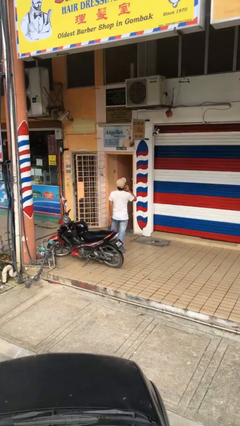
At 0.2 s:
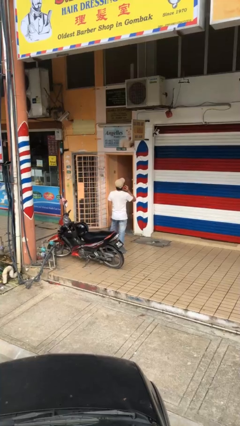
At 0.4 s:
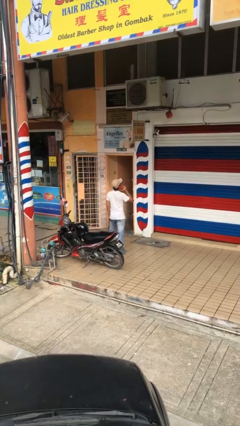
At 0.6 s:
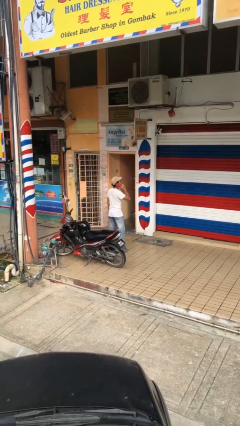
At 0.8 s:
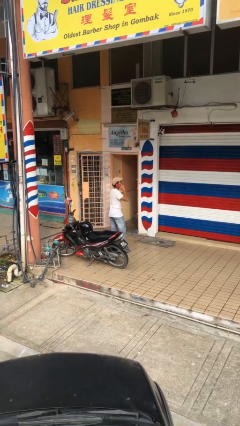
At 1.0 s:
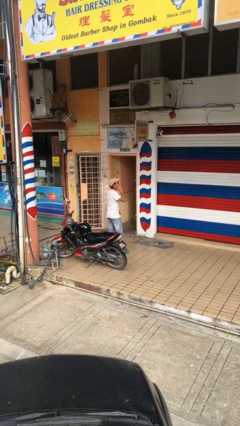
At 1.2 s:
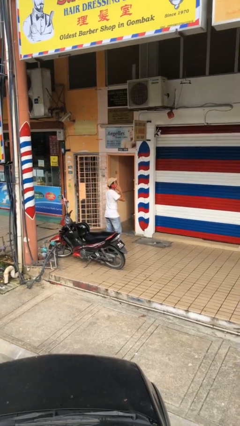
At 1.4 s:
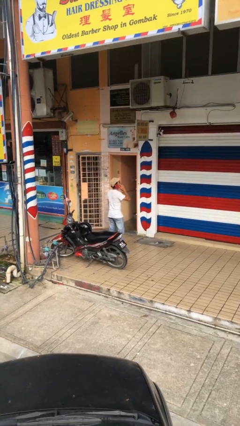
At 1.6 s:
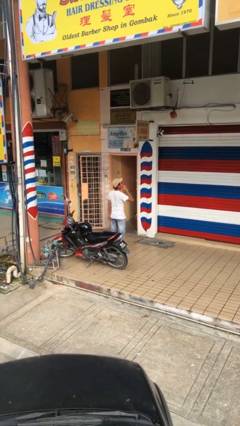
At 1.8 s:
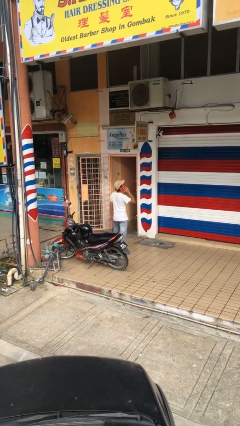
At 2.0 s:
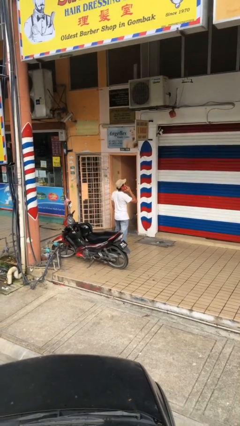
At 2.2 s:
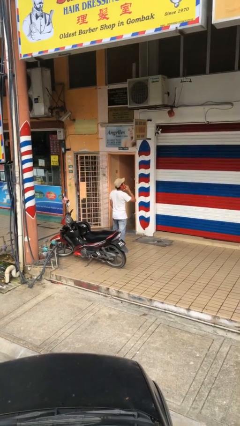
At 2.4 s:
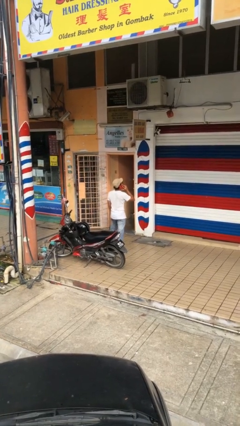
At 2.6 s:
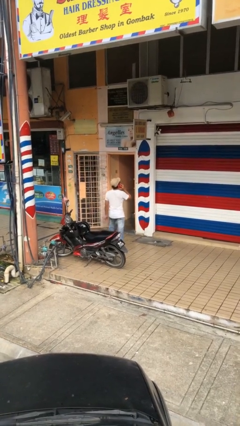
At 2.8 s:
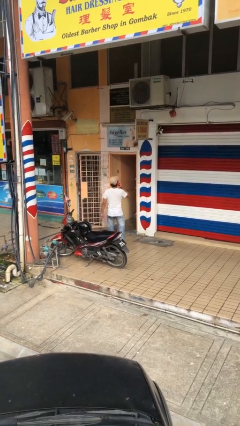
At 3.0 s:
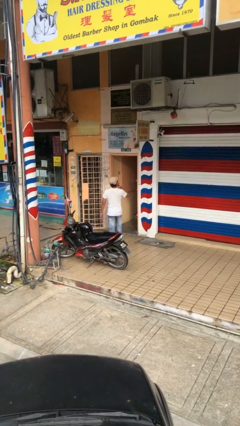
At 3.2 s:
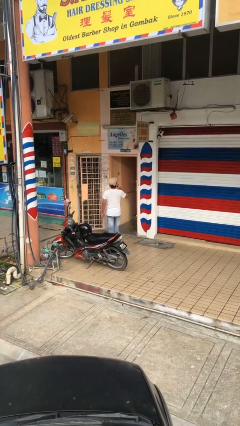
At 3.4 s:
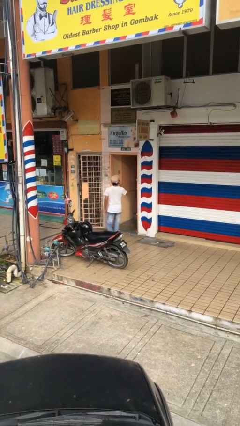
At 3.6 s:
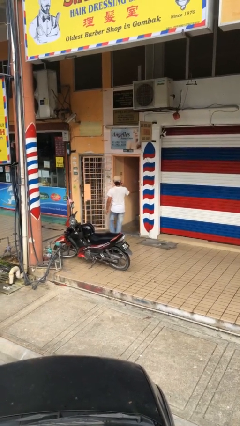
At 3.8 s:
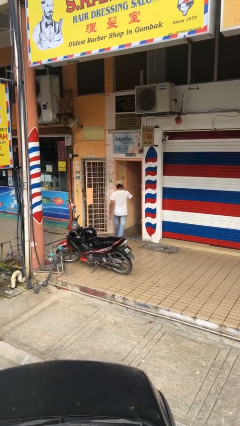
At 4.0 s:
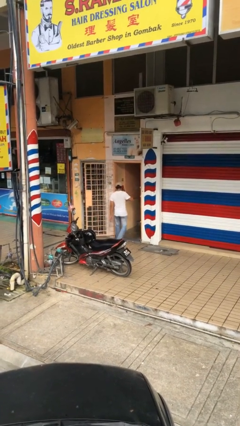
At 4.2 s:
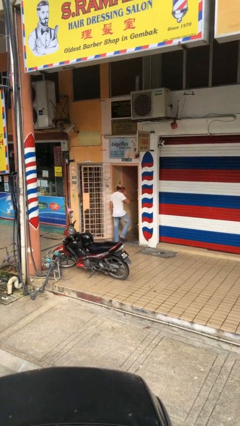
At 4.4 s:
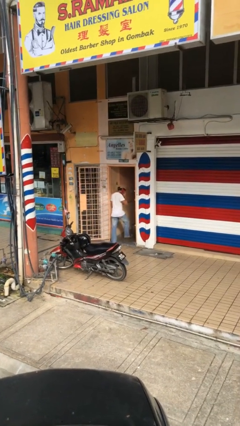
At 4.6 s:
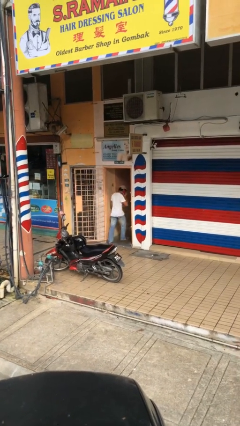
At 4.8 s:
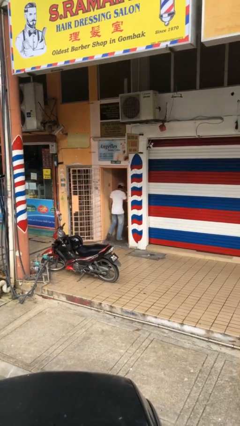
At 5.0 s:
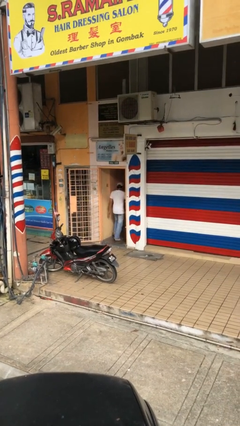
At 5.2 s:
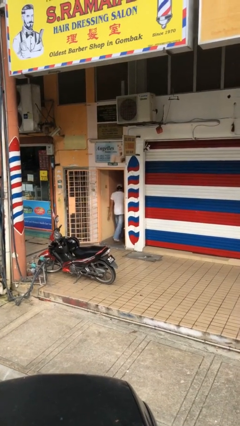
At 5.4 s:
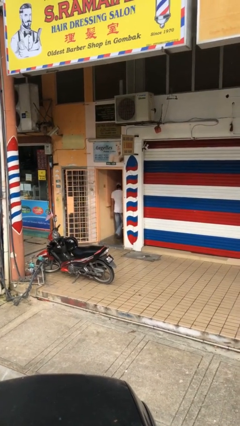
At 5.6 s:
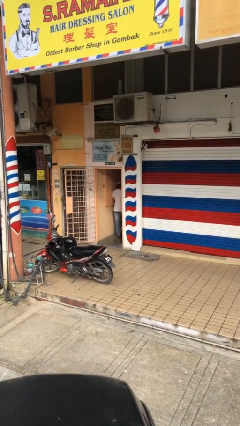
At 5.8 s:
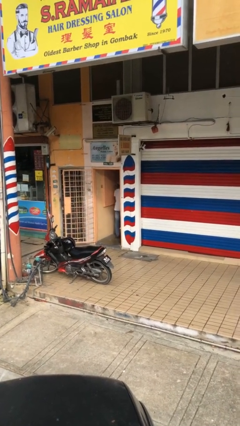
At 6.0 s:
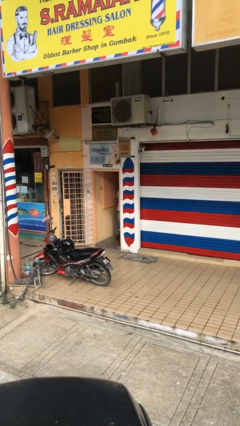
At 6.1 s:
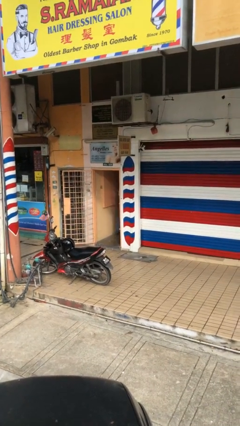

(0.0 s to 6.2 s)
person exits scene through structure
